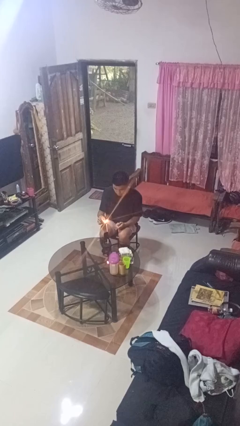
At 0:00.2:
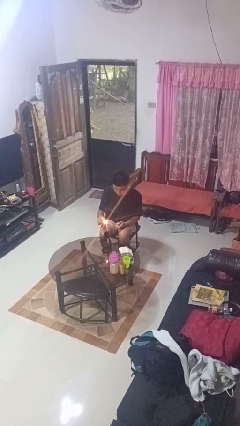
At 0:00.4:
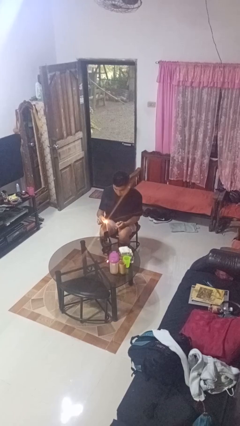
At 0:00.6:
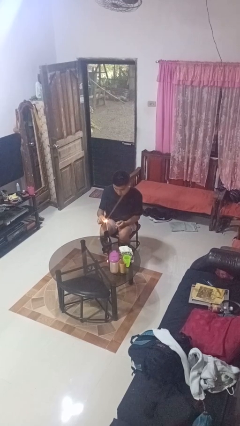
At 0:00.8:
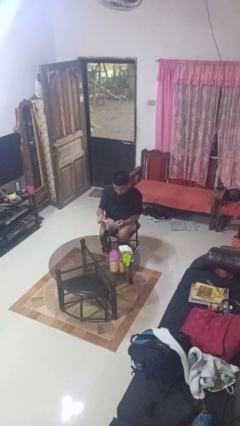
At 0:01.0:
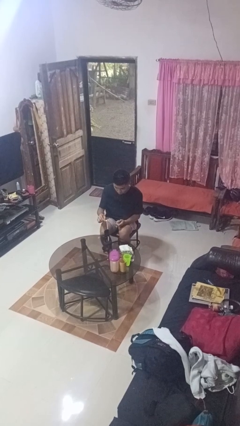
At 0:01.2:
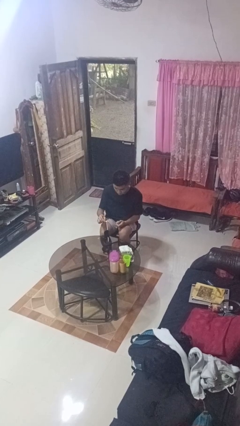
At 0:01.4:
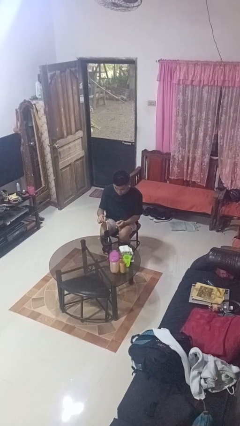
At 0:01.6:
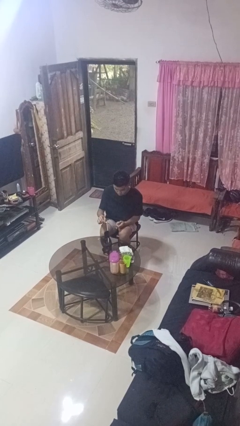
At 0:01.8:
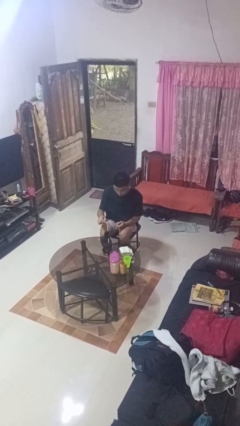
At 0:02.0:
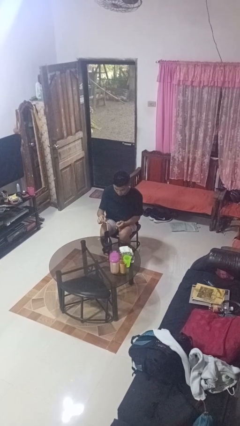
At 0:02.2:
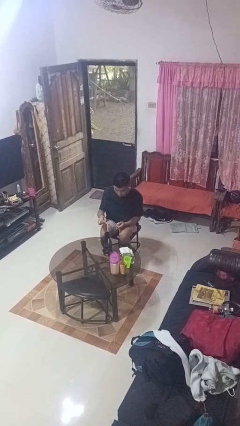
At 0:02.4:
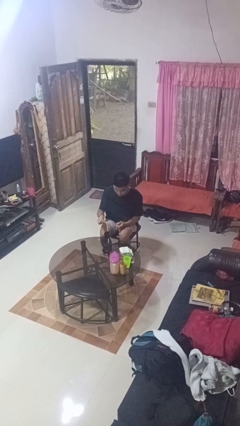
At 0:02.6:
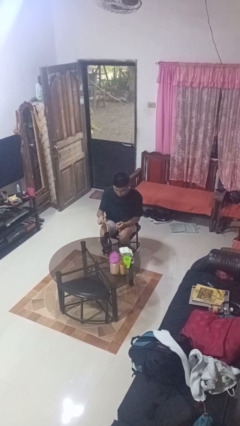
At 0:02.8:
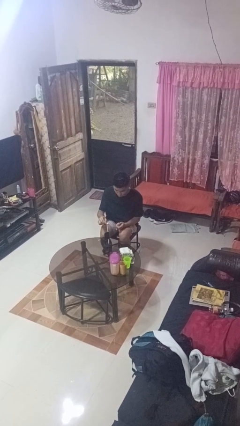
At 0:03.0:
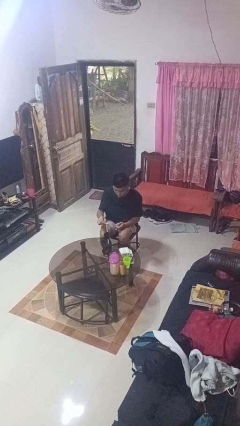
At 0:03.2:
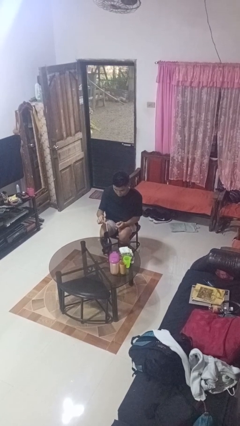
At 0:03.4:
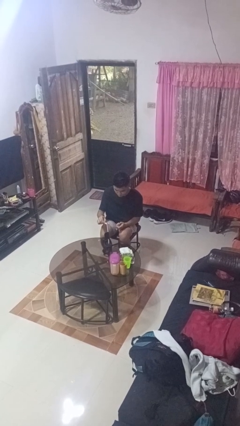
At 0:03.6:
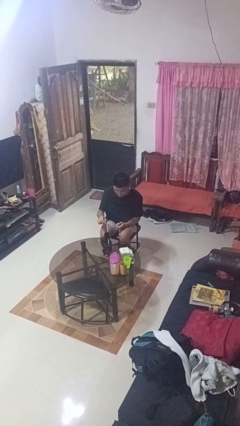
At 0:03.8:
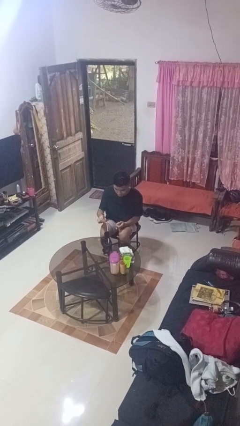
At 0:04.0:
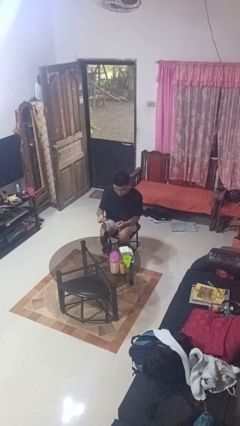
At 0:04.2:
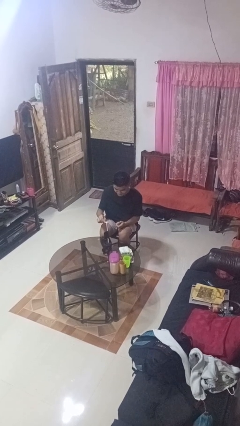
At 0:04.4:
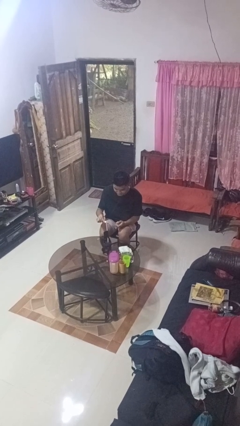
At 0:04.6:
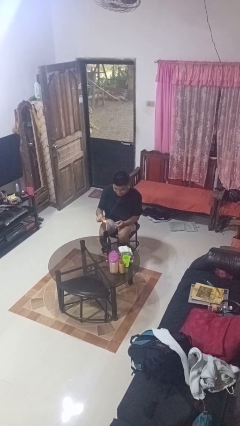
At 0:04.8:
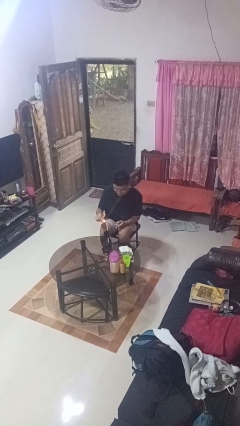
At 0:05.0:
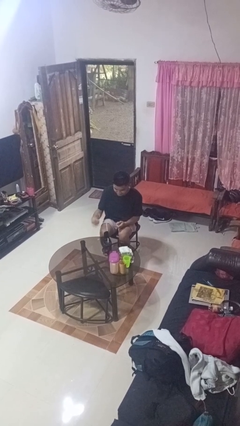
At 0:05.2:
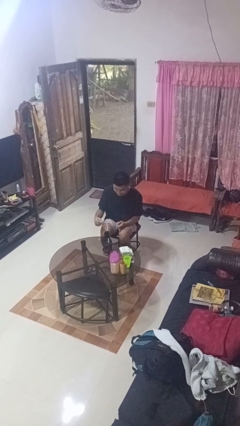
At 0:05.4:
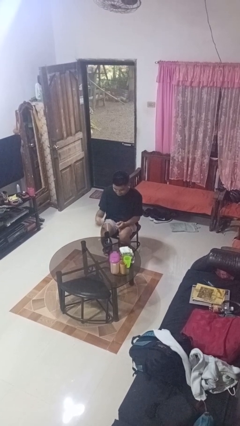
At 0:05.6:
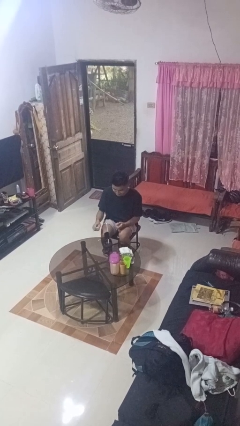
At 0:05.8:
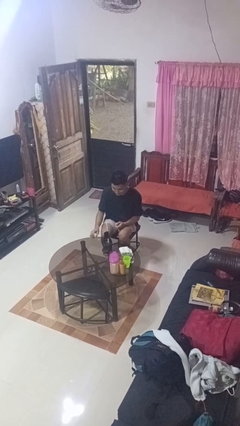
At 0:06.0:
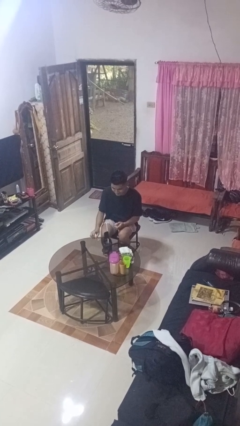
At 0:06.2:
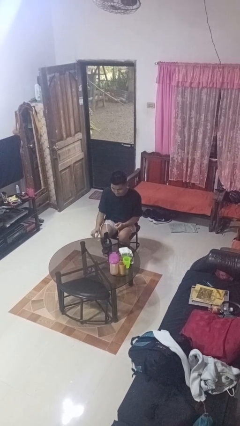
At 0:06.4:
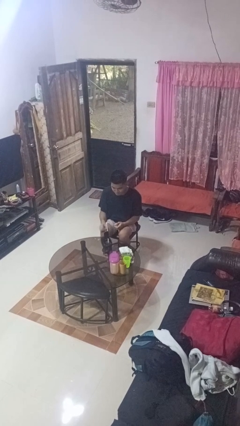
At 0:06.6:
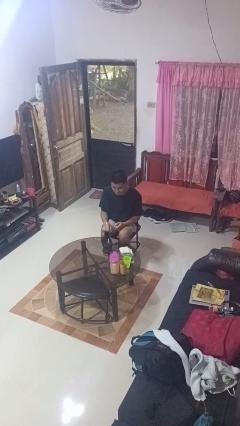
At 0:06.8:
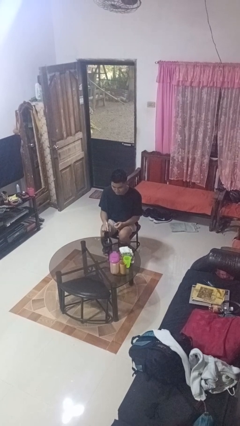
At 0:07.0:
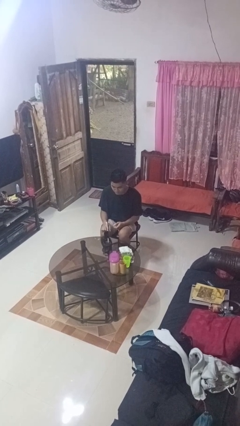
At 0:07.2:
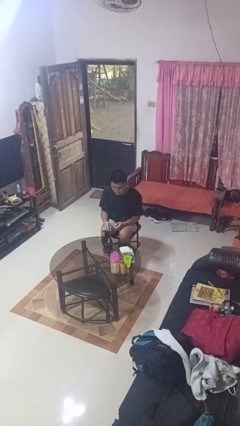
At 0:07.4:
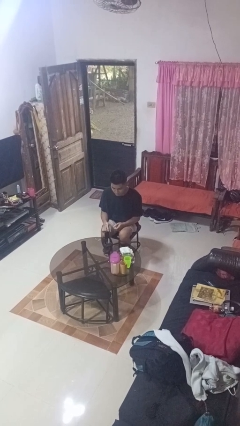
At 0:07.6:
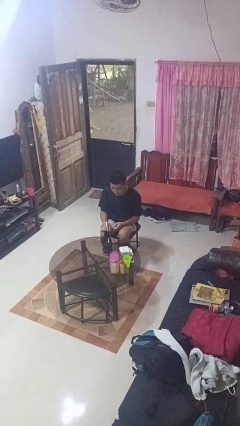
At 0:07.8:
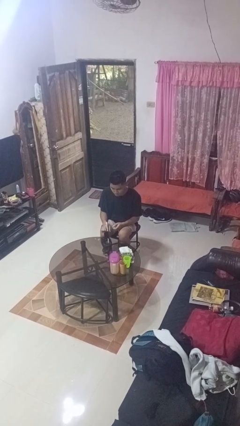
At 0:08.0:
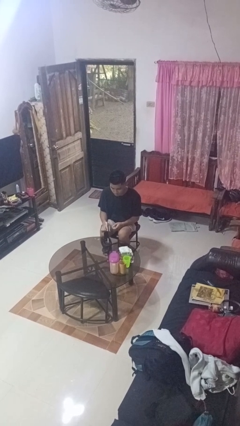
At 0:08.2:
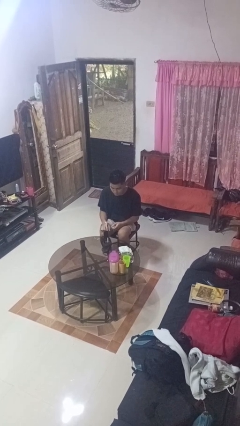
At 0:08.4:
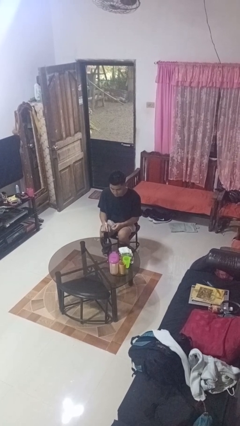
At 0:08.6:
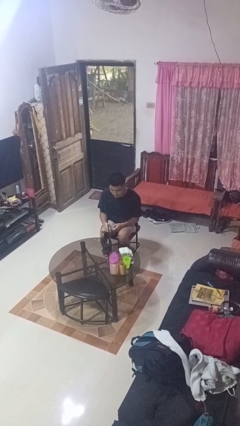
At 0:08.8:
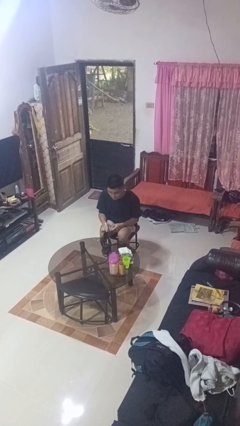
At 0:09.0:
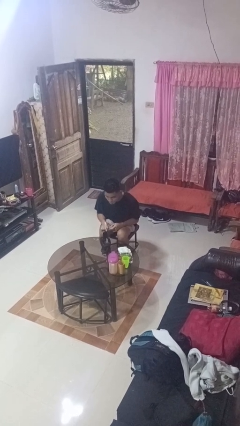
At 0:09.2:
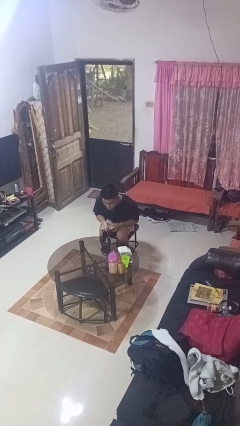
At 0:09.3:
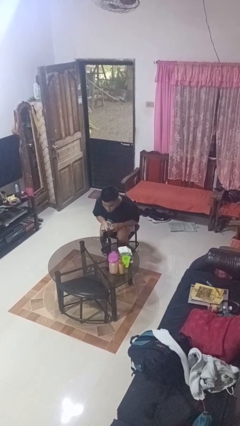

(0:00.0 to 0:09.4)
person lights candle

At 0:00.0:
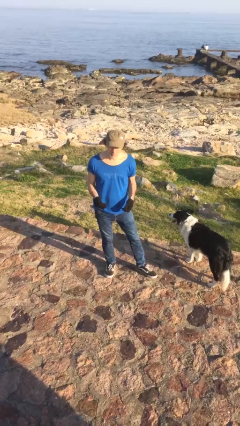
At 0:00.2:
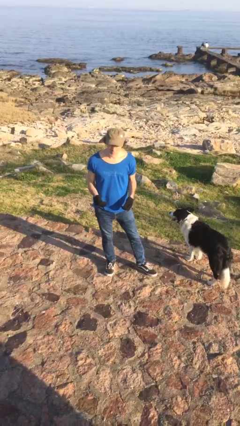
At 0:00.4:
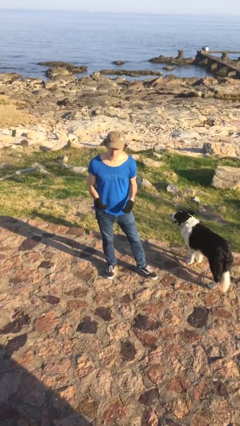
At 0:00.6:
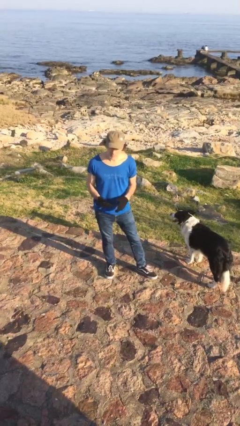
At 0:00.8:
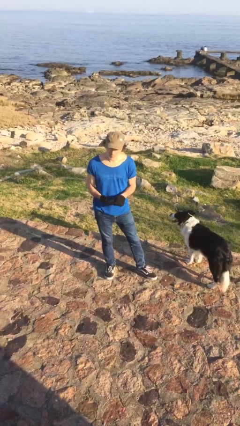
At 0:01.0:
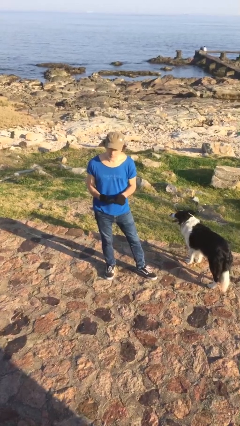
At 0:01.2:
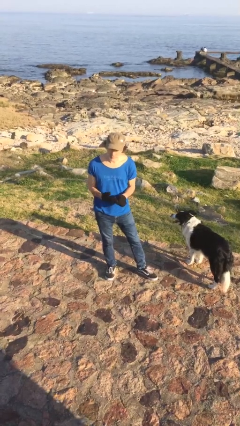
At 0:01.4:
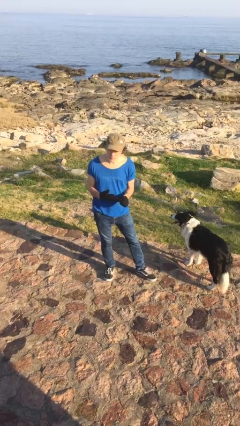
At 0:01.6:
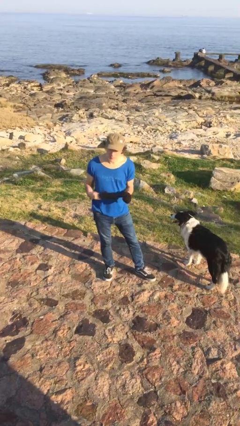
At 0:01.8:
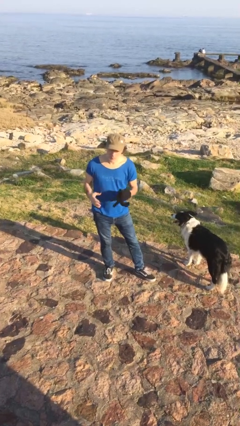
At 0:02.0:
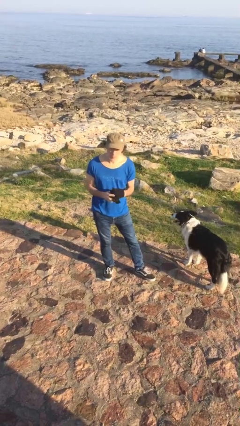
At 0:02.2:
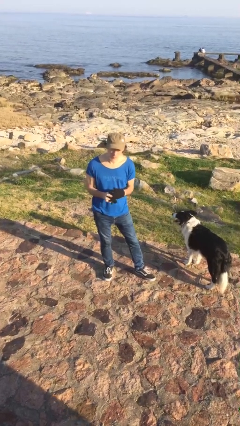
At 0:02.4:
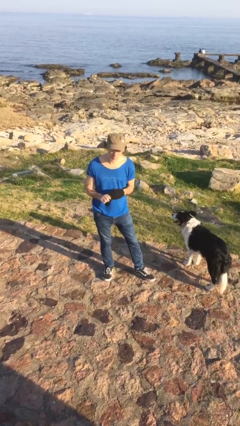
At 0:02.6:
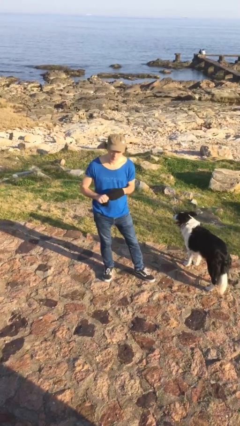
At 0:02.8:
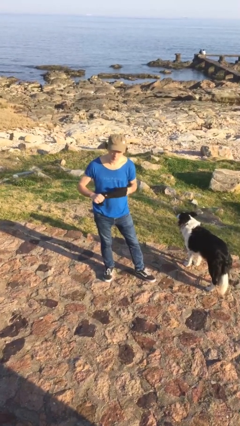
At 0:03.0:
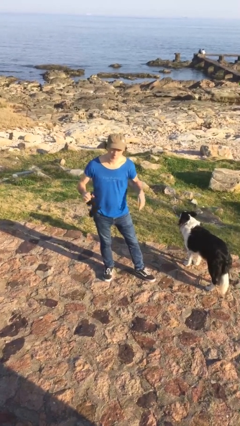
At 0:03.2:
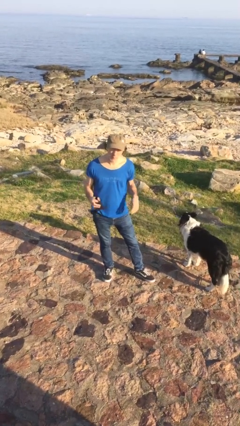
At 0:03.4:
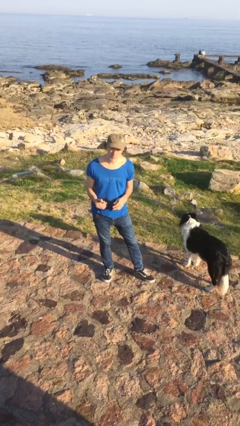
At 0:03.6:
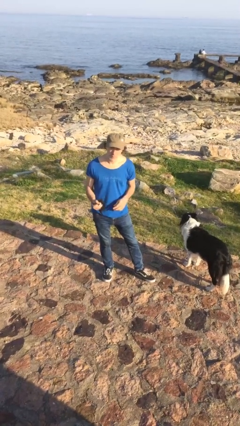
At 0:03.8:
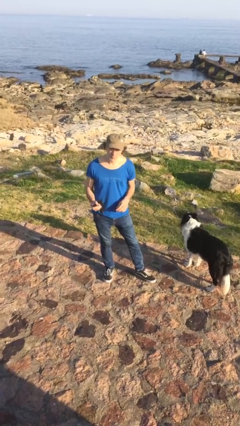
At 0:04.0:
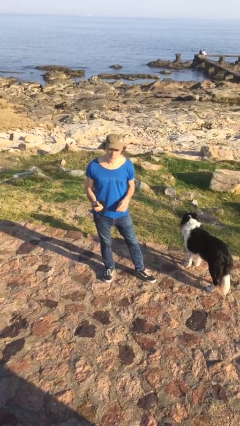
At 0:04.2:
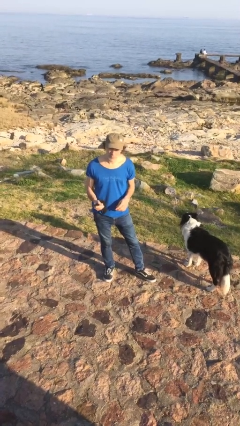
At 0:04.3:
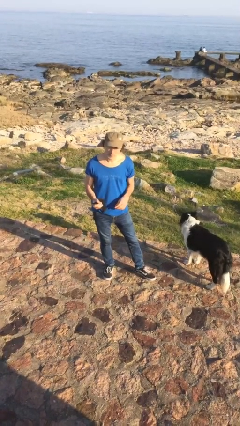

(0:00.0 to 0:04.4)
person takes off gloves

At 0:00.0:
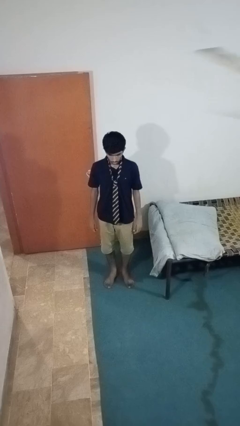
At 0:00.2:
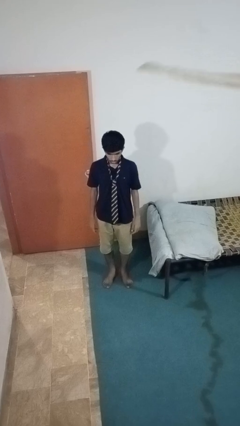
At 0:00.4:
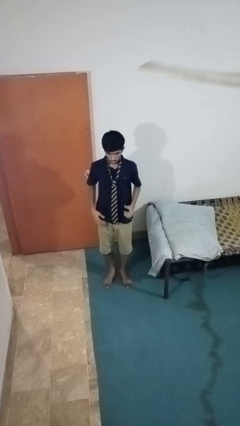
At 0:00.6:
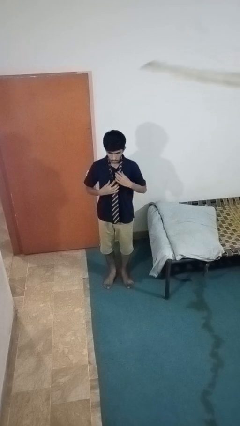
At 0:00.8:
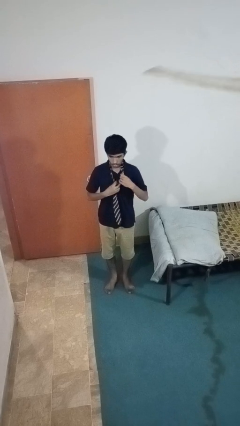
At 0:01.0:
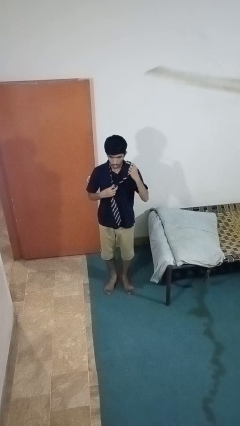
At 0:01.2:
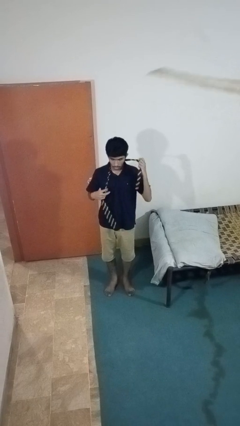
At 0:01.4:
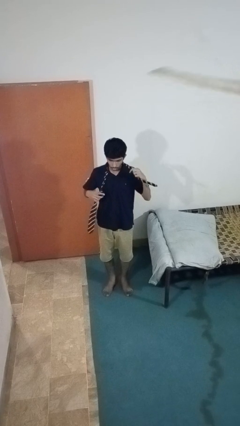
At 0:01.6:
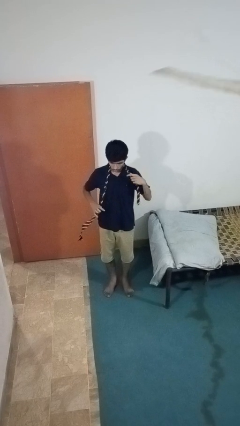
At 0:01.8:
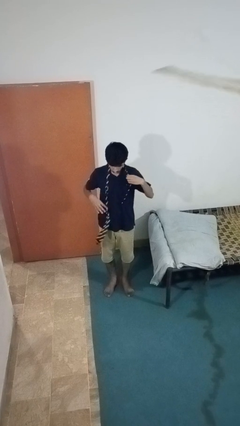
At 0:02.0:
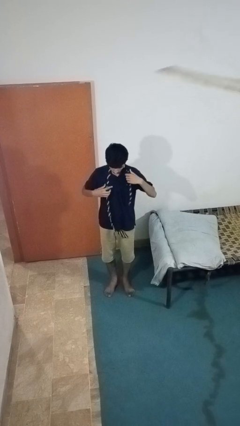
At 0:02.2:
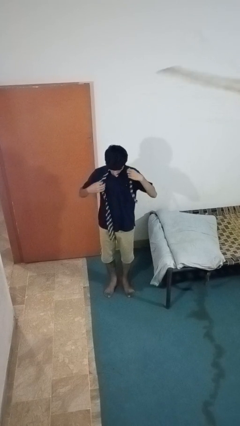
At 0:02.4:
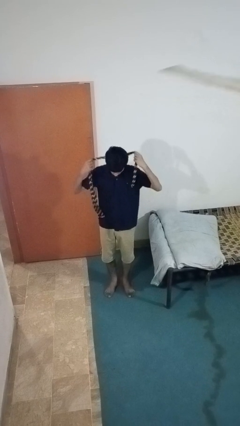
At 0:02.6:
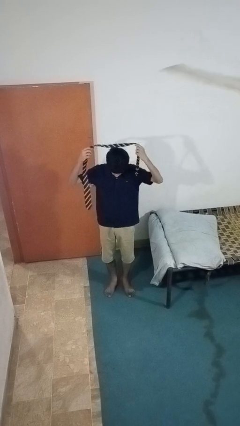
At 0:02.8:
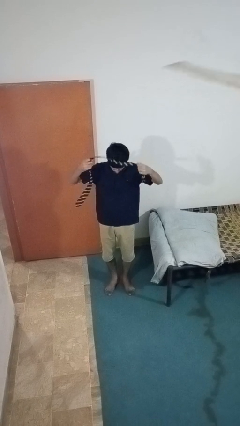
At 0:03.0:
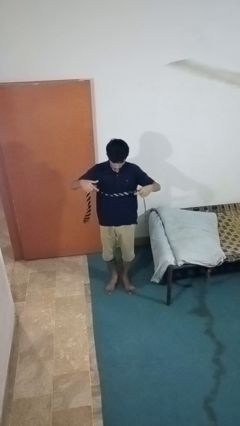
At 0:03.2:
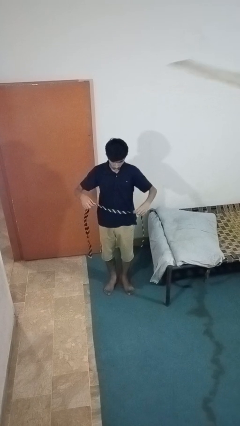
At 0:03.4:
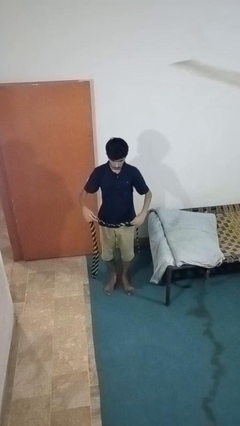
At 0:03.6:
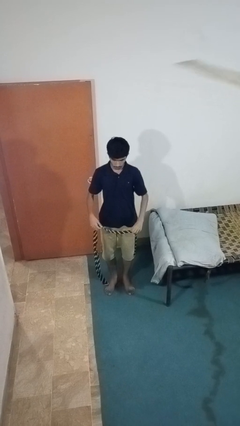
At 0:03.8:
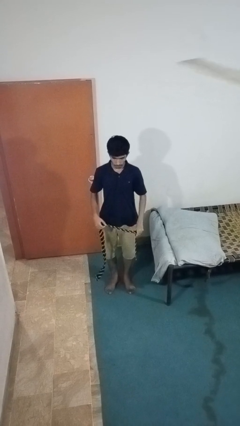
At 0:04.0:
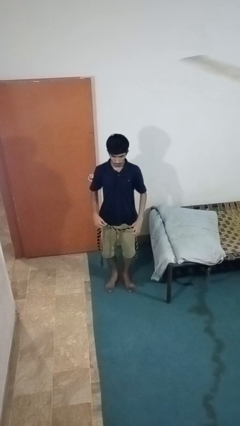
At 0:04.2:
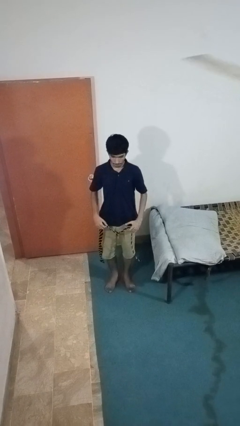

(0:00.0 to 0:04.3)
person takes off necktie
